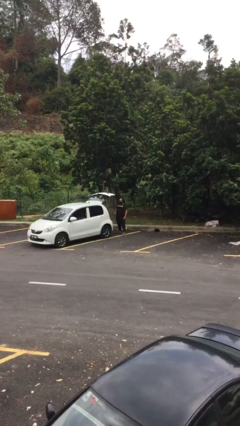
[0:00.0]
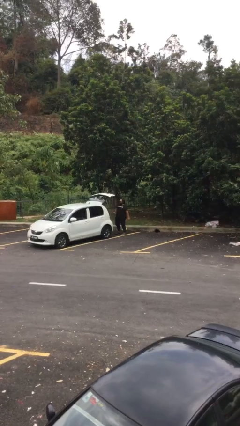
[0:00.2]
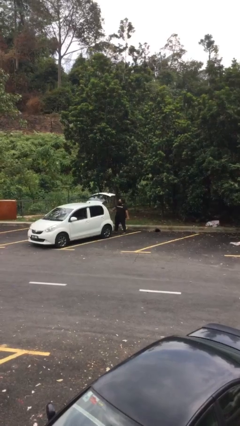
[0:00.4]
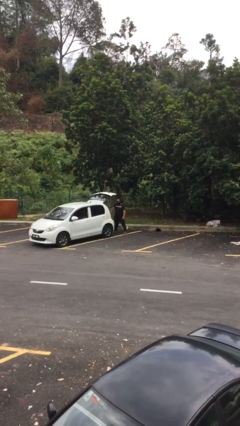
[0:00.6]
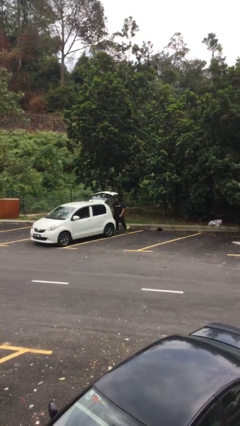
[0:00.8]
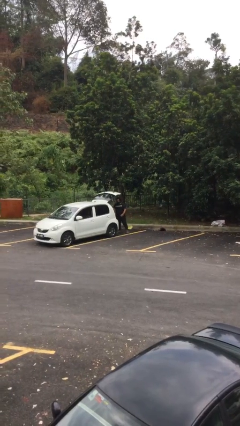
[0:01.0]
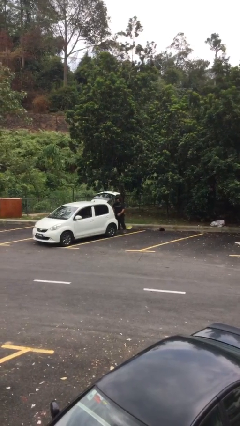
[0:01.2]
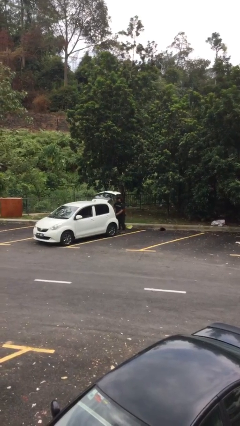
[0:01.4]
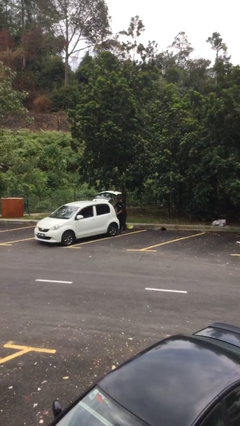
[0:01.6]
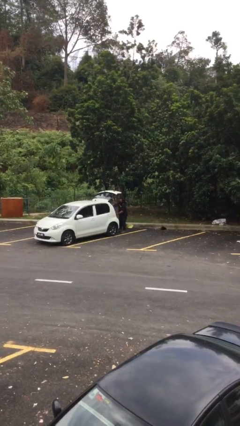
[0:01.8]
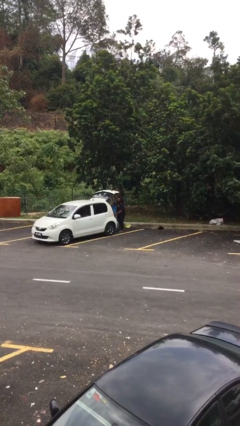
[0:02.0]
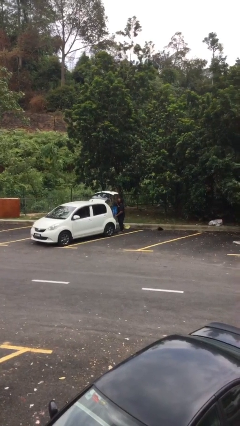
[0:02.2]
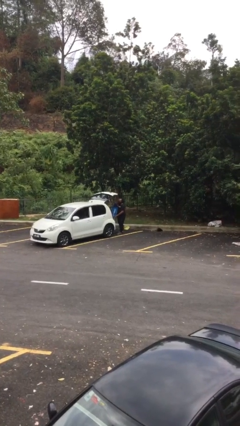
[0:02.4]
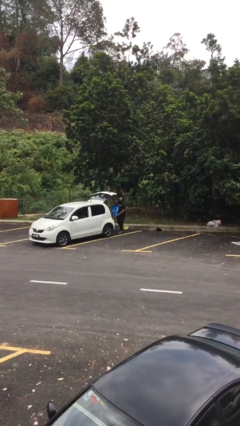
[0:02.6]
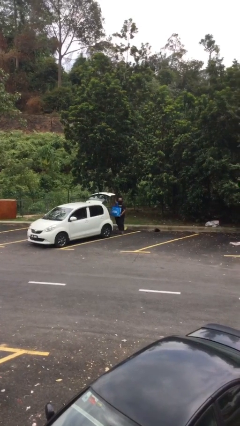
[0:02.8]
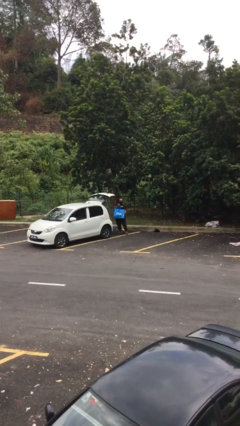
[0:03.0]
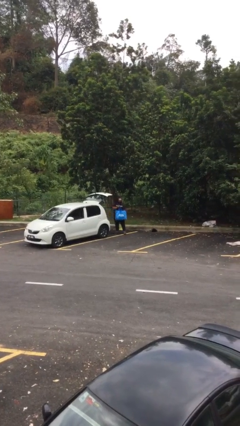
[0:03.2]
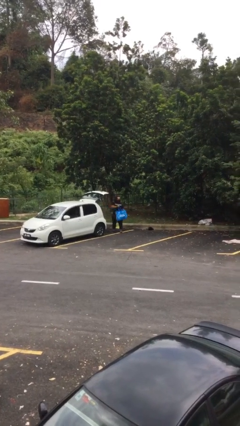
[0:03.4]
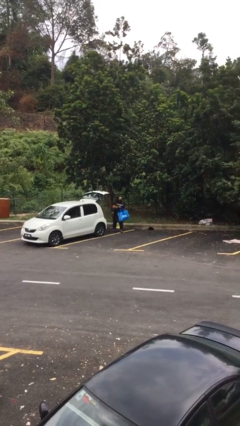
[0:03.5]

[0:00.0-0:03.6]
person unloads car

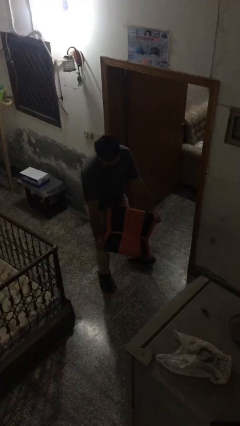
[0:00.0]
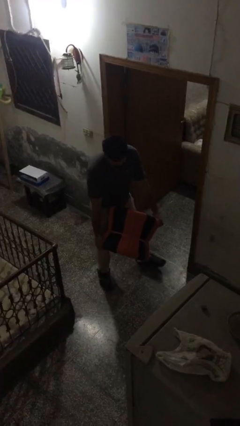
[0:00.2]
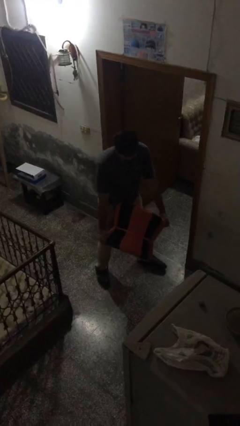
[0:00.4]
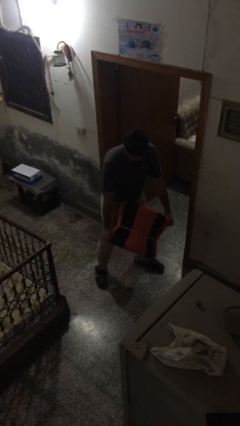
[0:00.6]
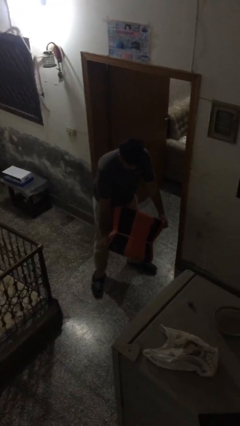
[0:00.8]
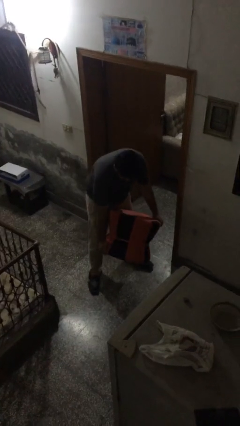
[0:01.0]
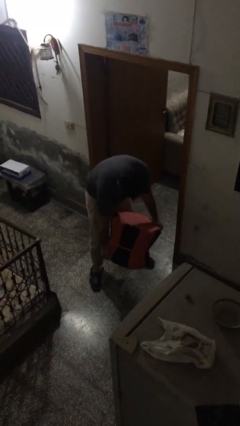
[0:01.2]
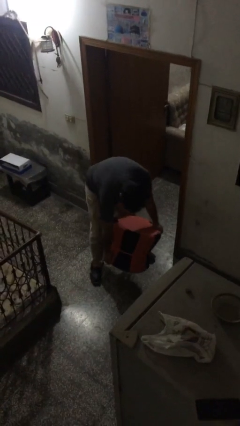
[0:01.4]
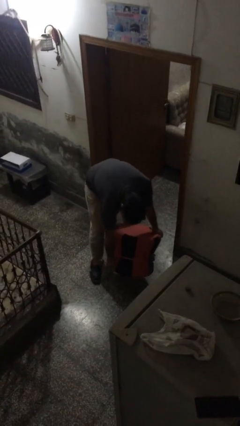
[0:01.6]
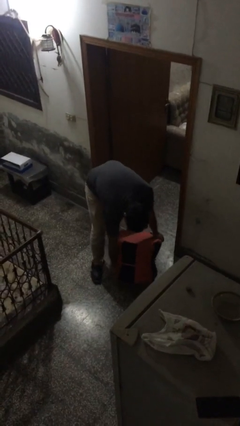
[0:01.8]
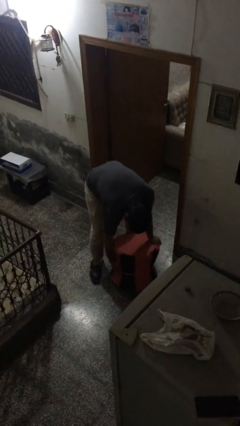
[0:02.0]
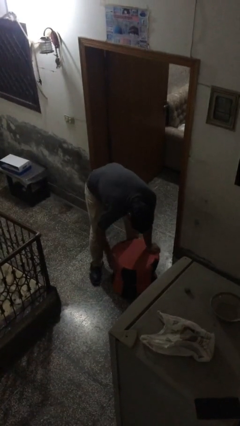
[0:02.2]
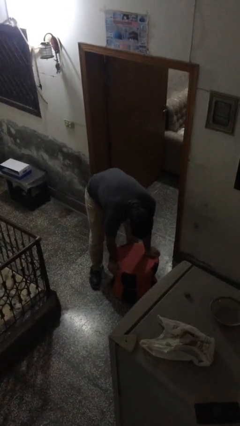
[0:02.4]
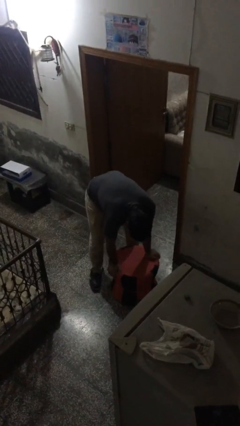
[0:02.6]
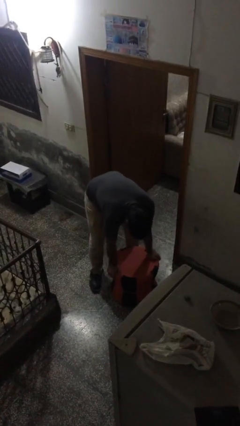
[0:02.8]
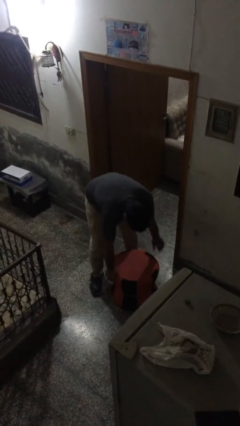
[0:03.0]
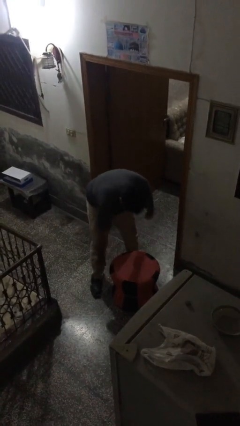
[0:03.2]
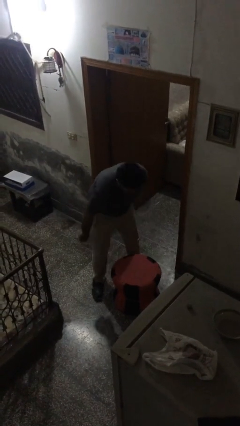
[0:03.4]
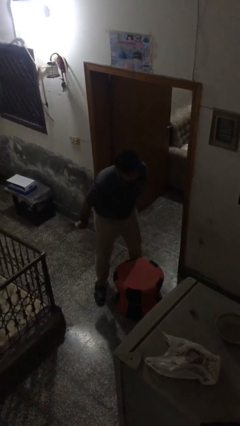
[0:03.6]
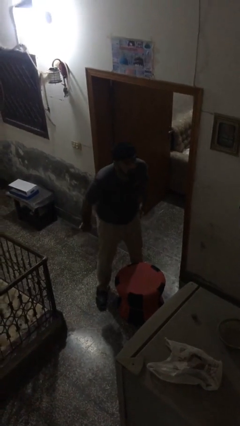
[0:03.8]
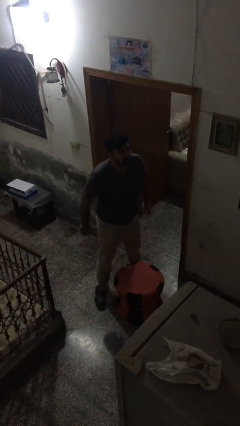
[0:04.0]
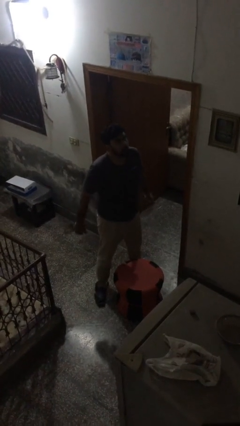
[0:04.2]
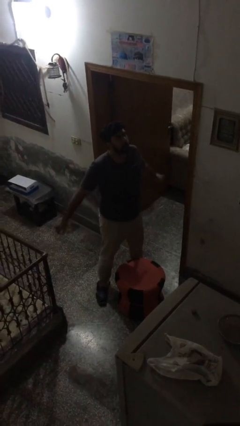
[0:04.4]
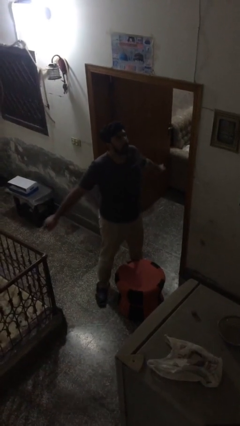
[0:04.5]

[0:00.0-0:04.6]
person puts down object on floor

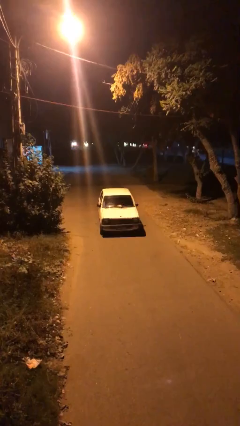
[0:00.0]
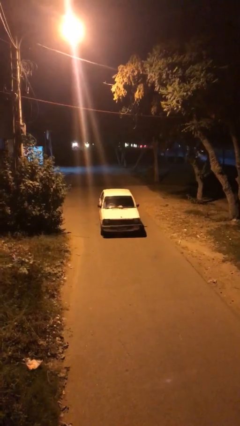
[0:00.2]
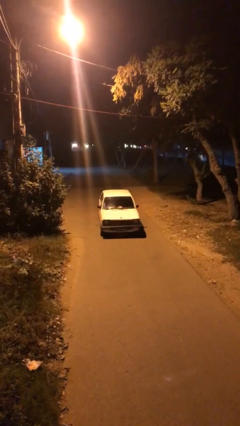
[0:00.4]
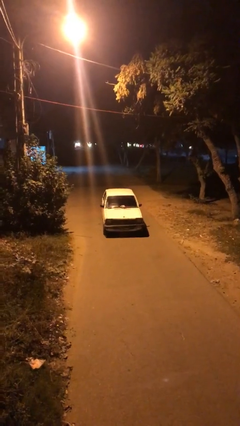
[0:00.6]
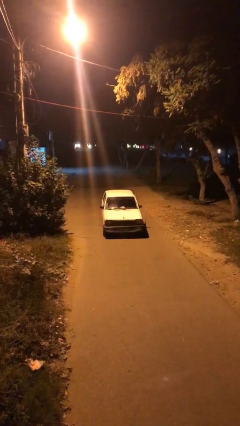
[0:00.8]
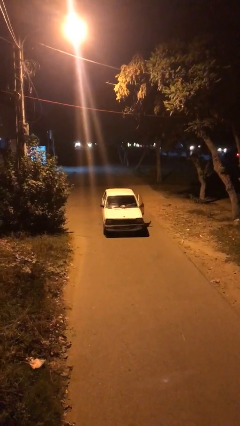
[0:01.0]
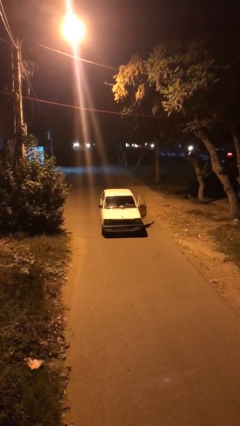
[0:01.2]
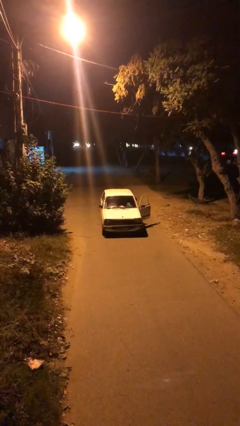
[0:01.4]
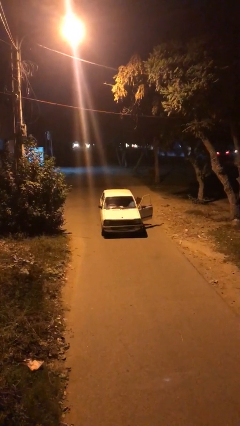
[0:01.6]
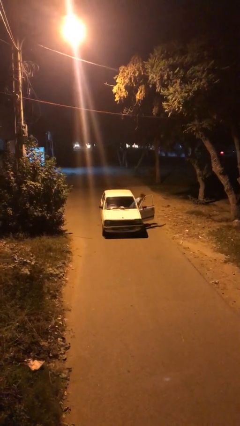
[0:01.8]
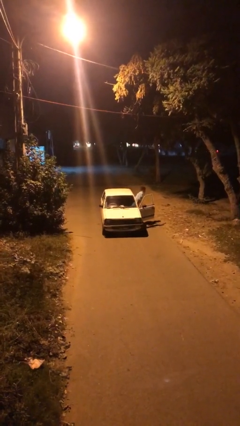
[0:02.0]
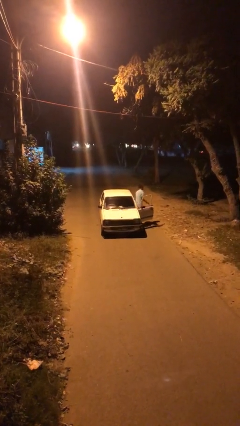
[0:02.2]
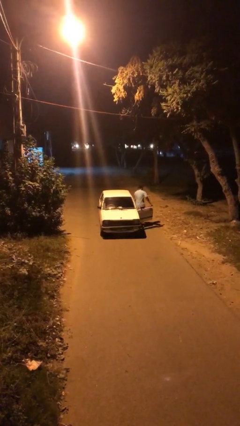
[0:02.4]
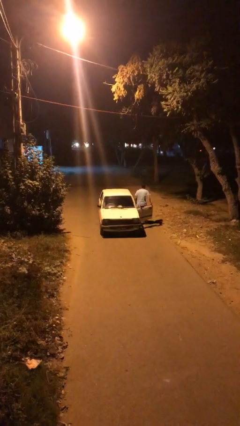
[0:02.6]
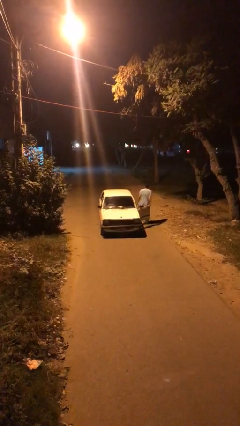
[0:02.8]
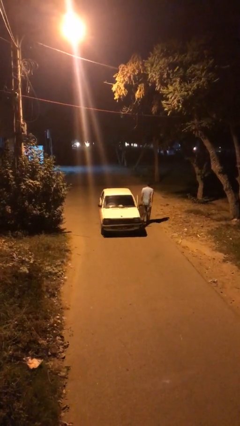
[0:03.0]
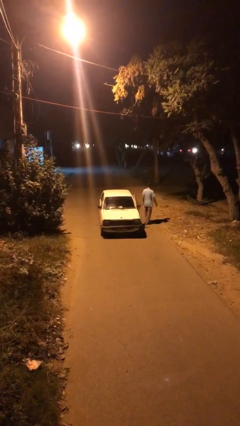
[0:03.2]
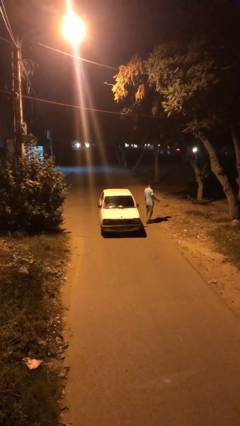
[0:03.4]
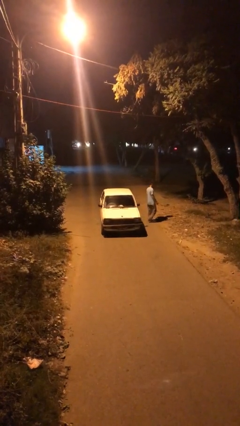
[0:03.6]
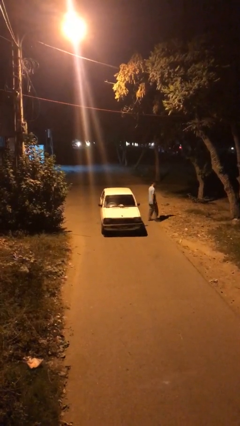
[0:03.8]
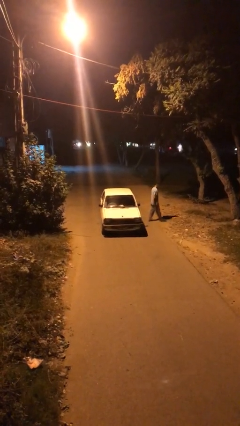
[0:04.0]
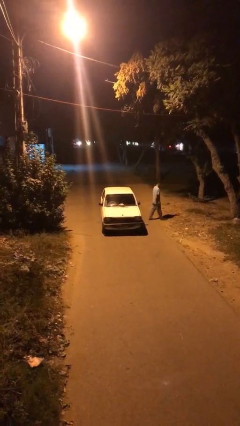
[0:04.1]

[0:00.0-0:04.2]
car drops off person

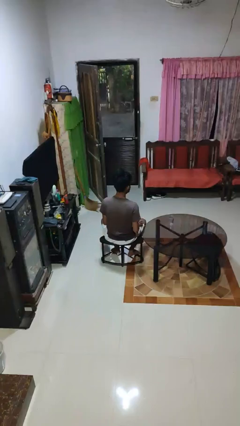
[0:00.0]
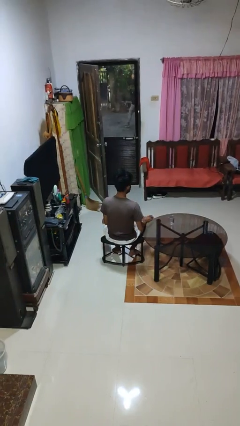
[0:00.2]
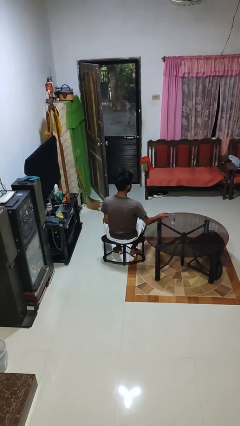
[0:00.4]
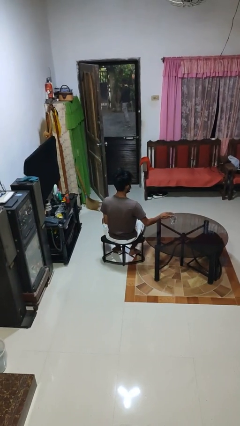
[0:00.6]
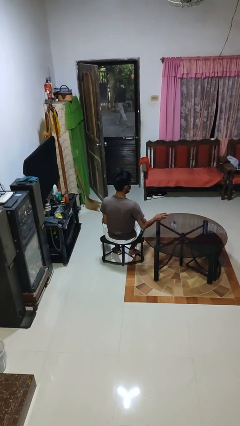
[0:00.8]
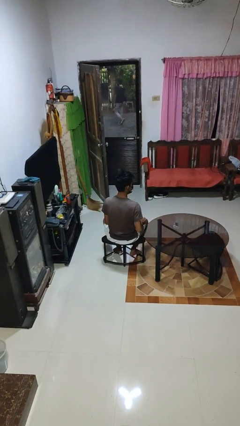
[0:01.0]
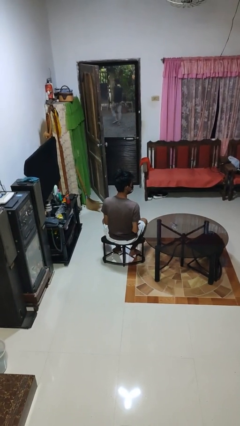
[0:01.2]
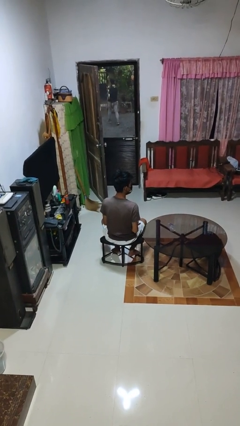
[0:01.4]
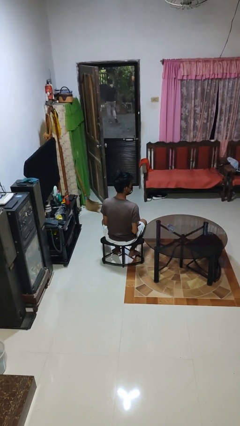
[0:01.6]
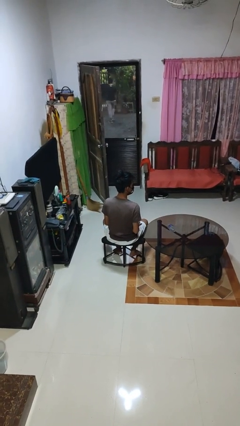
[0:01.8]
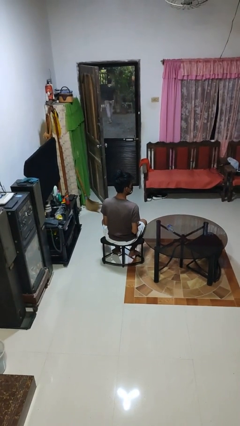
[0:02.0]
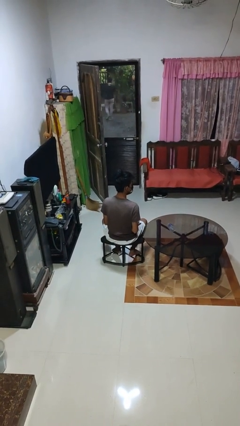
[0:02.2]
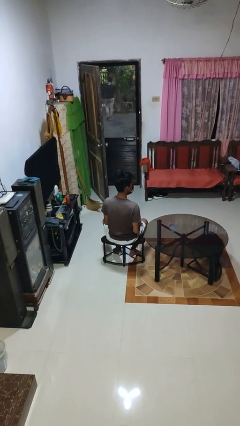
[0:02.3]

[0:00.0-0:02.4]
person knocks over glass

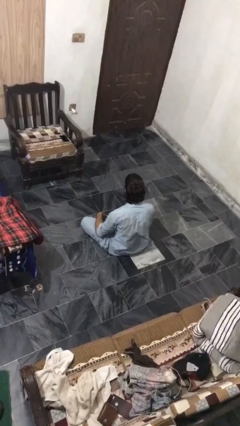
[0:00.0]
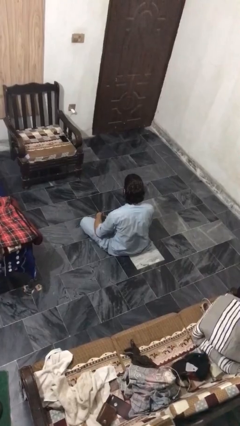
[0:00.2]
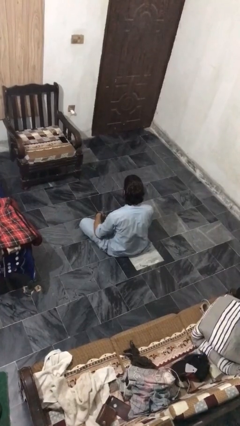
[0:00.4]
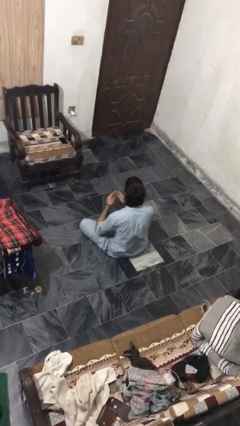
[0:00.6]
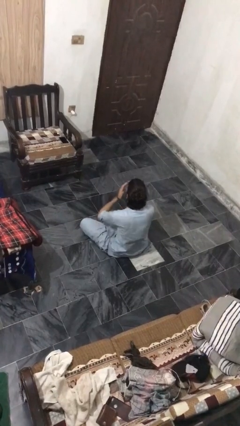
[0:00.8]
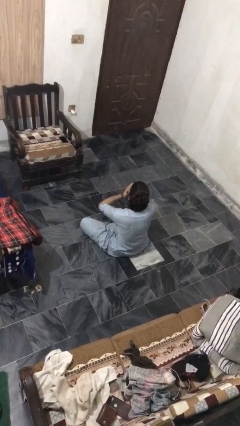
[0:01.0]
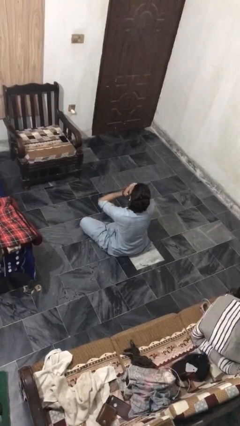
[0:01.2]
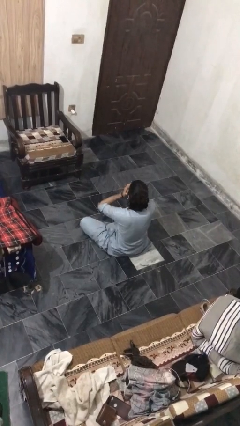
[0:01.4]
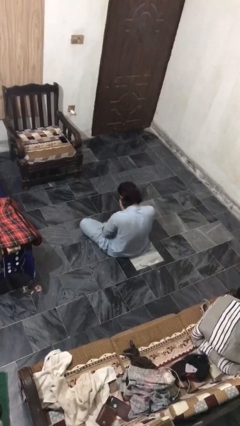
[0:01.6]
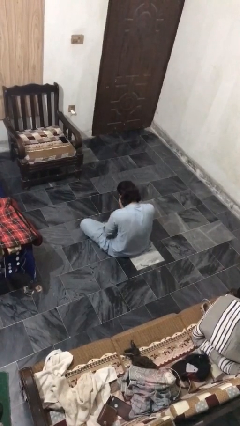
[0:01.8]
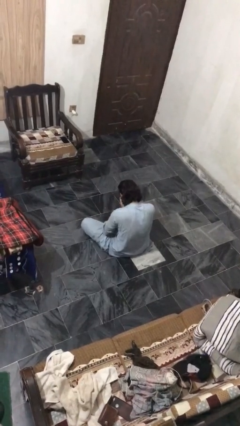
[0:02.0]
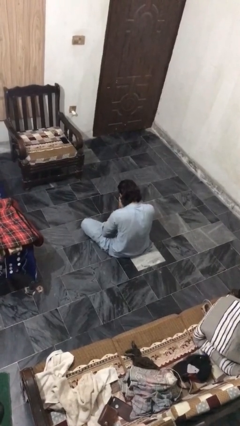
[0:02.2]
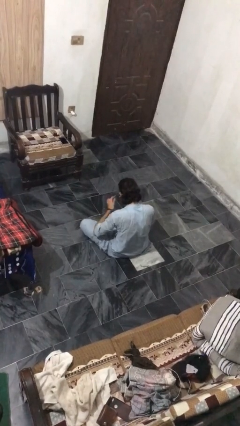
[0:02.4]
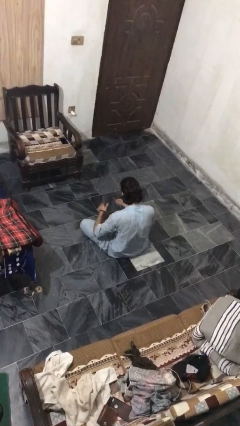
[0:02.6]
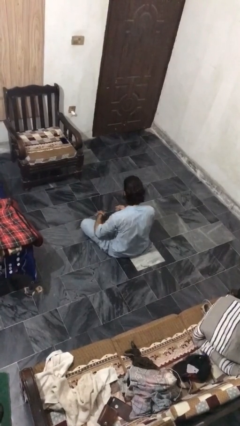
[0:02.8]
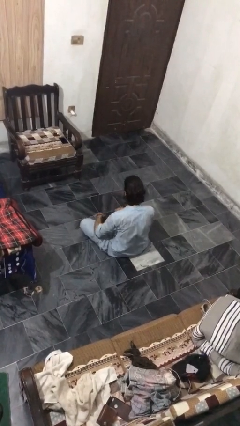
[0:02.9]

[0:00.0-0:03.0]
person sneezes into hand
